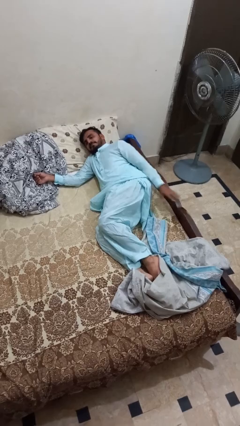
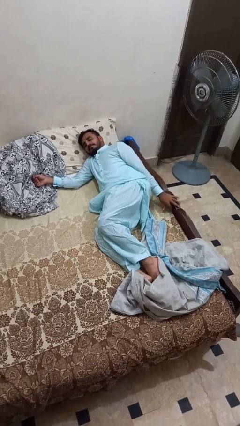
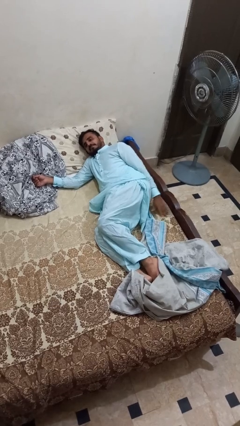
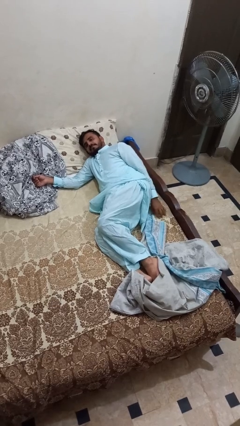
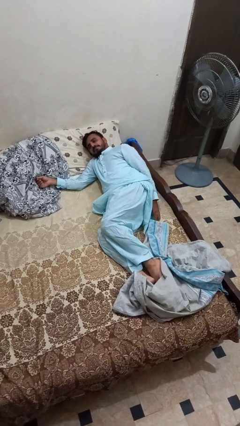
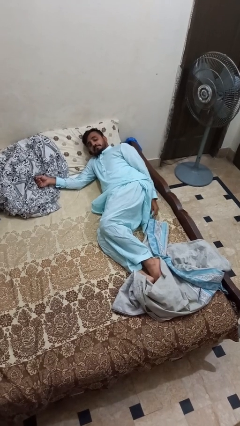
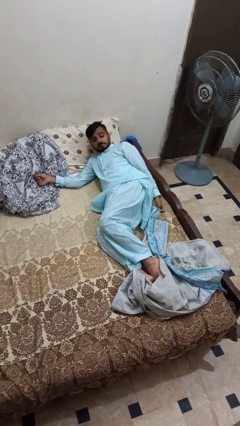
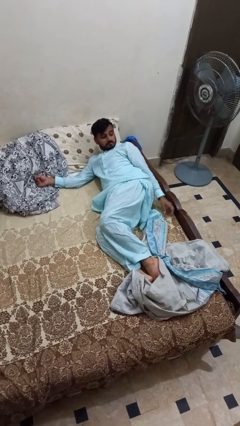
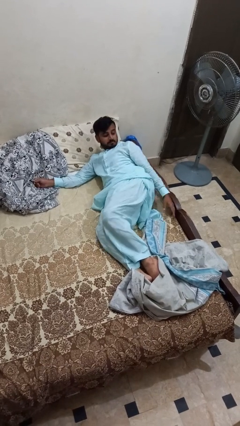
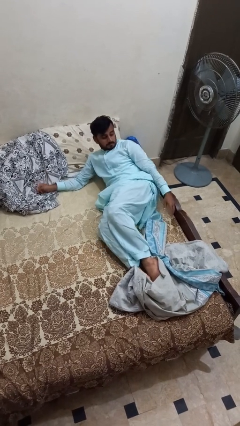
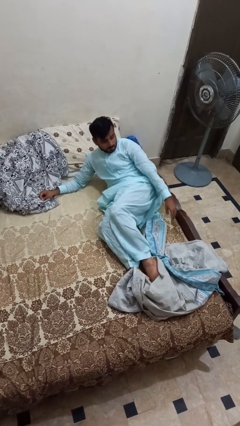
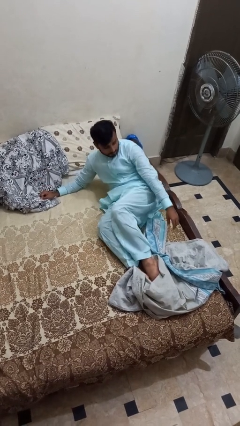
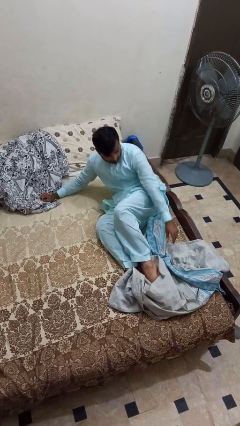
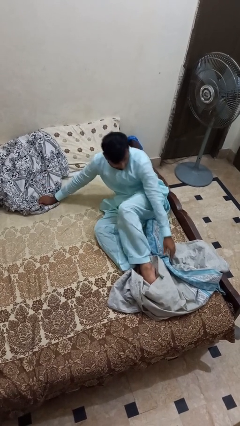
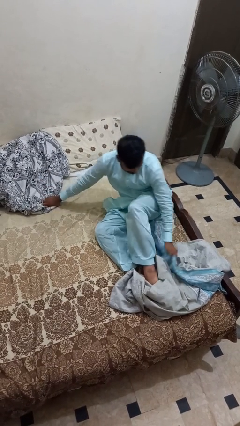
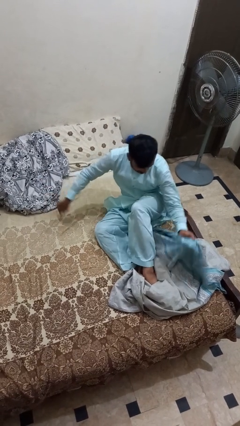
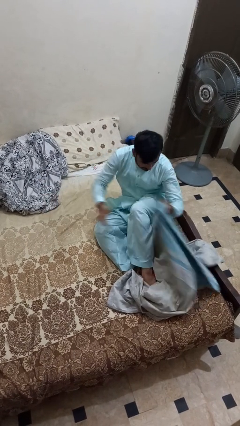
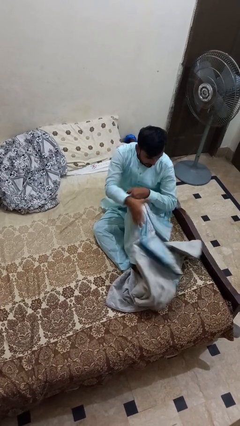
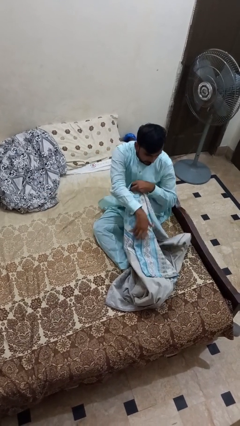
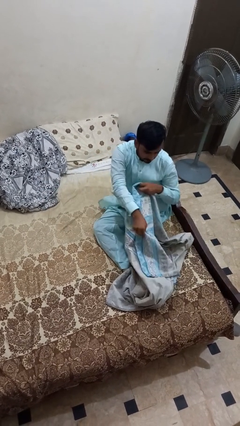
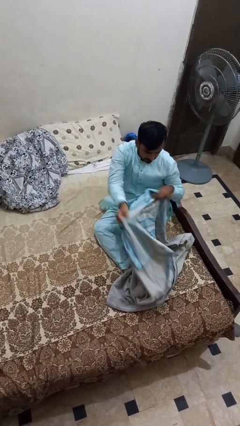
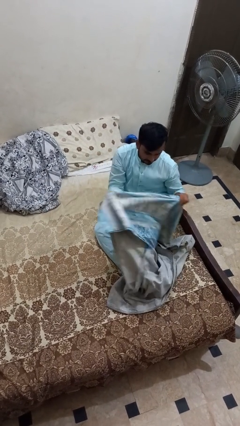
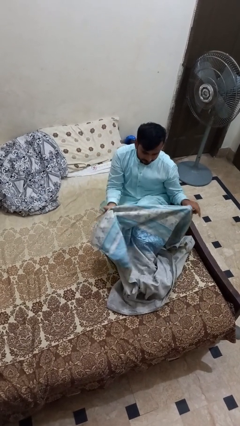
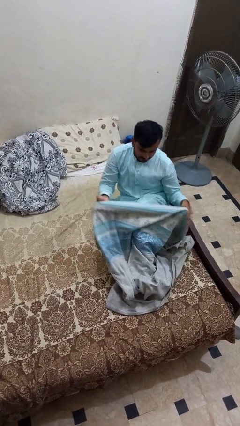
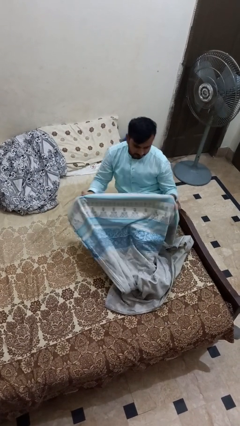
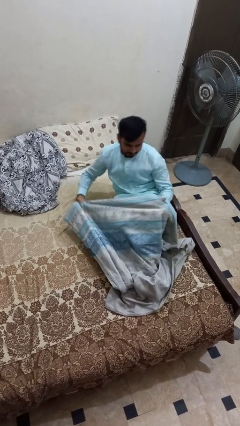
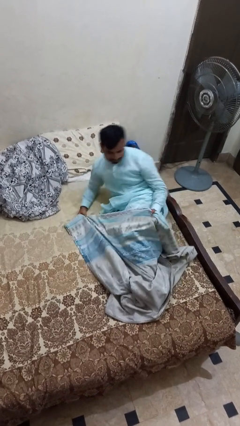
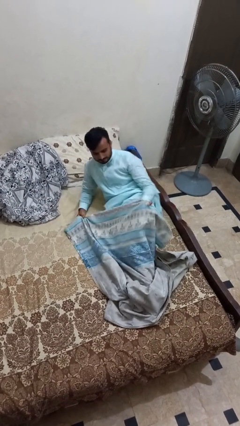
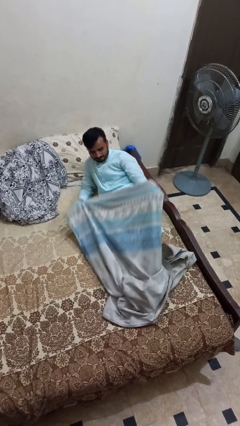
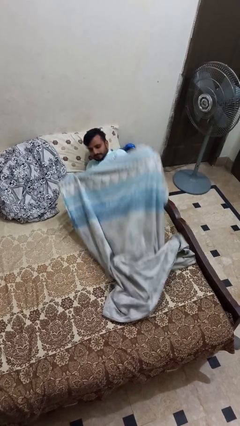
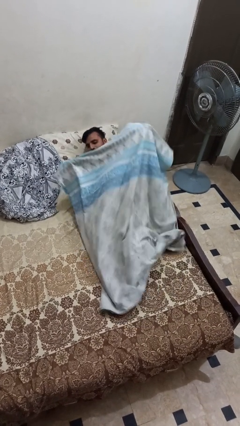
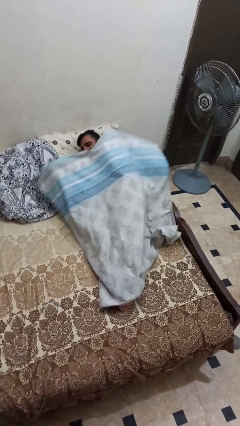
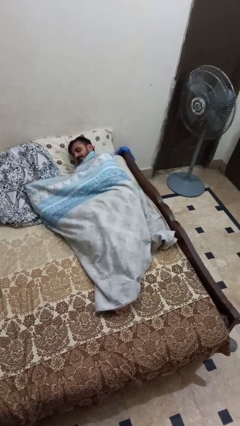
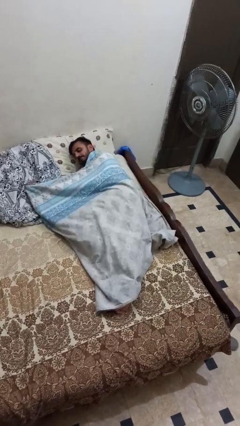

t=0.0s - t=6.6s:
person covers with bedsheets

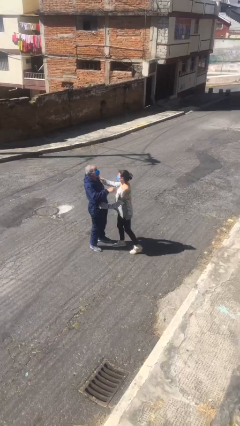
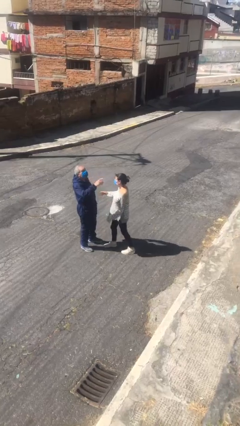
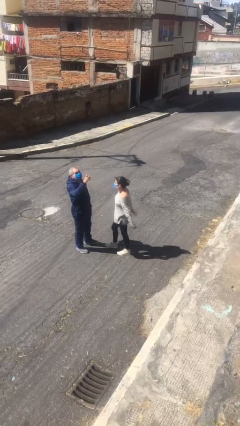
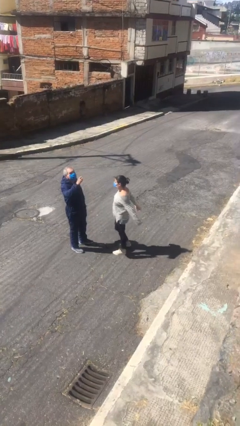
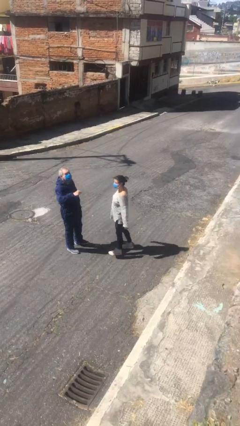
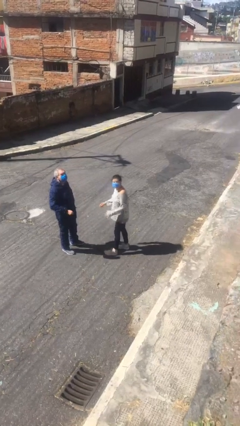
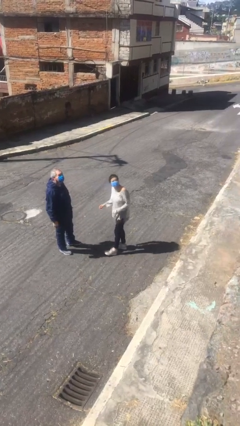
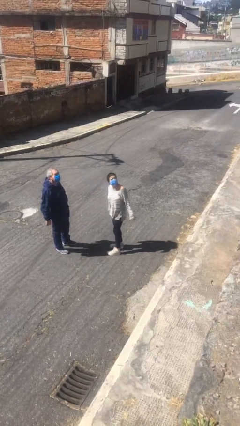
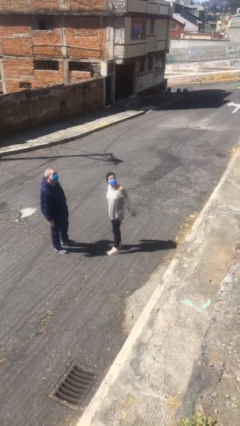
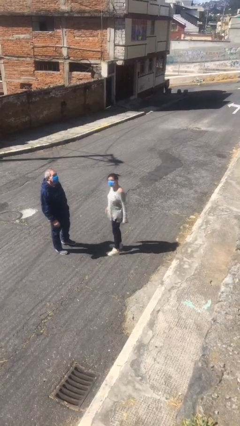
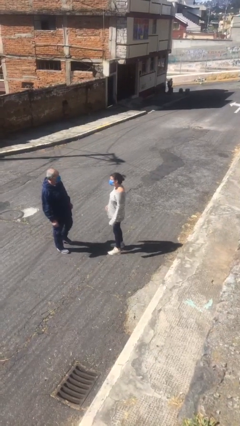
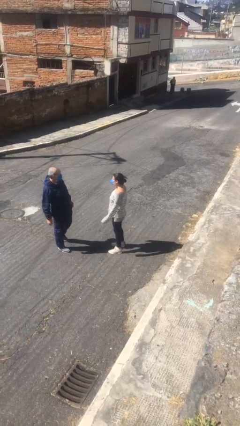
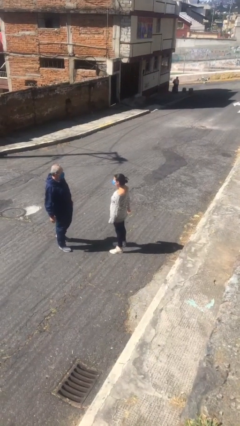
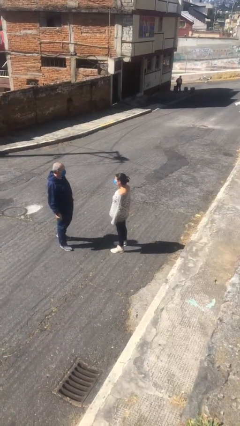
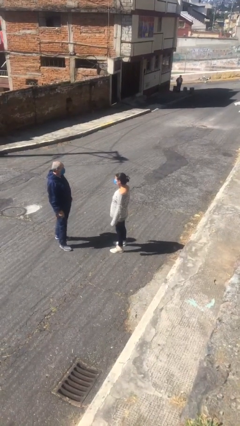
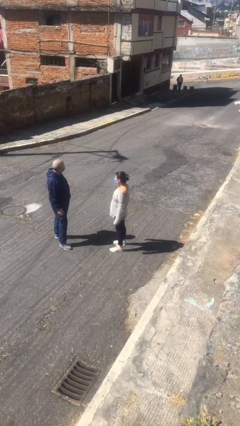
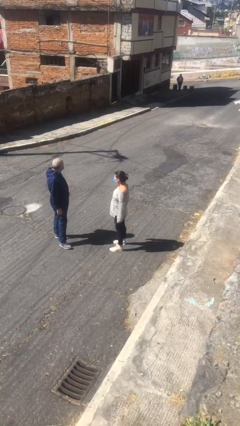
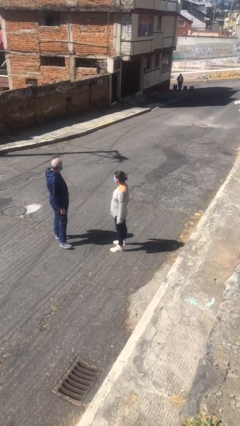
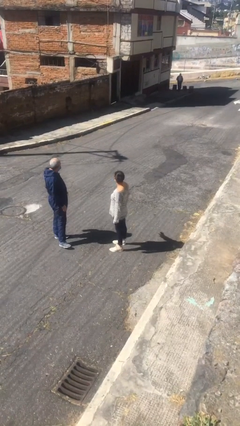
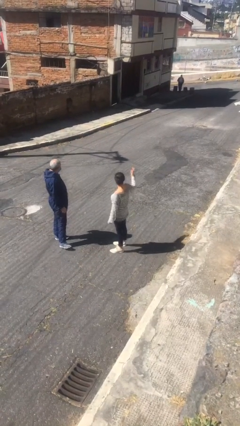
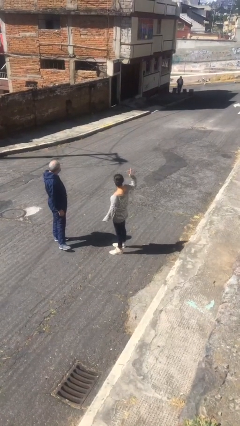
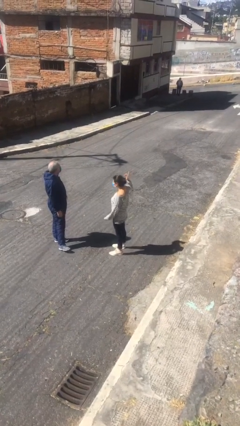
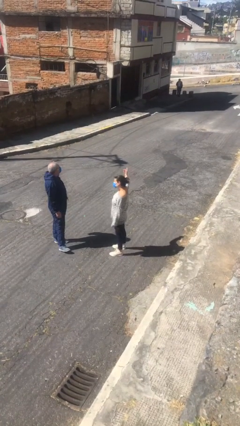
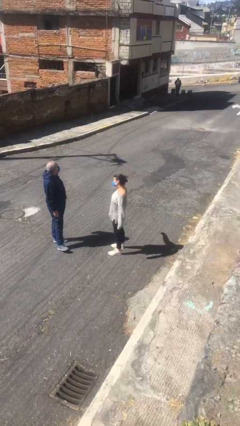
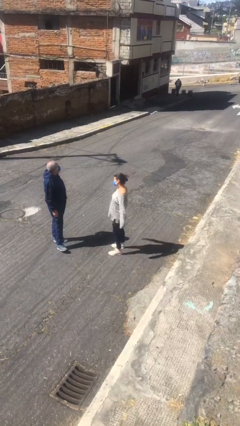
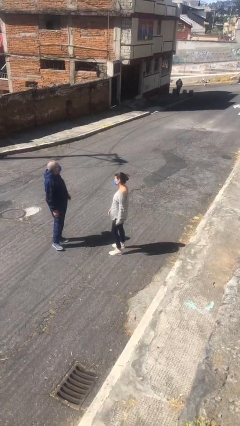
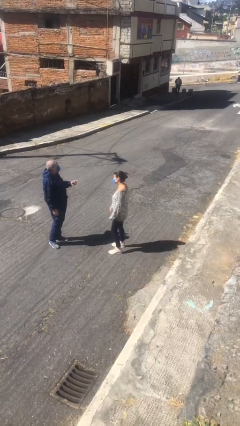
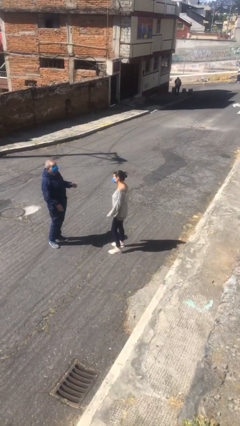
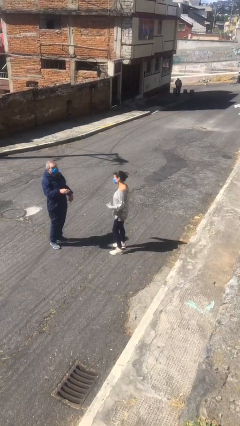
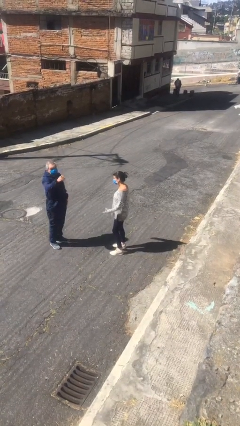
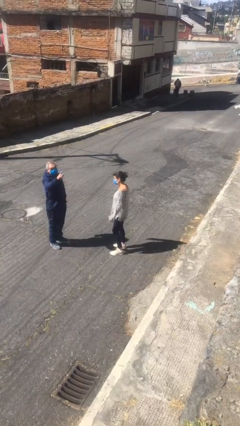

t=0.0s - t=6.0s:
person talks to person

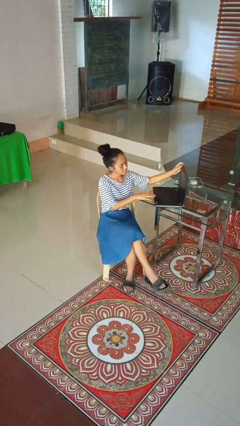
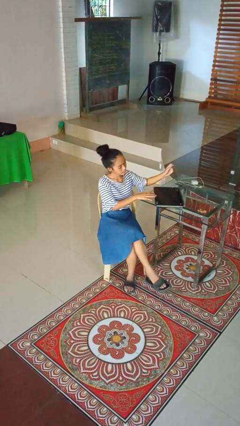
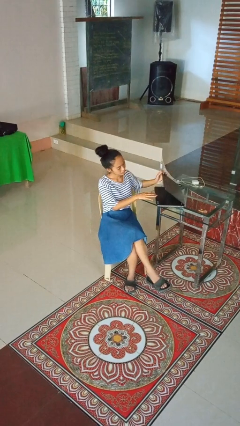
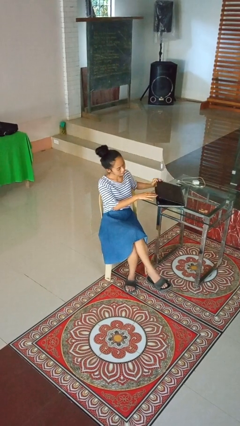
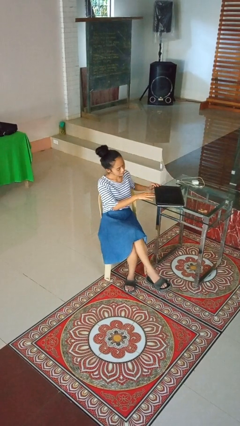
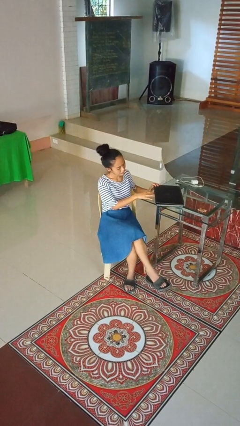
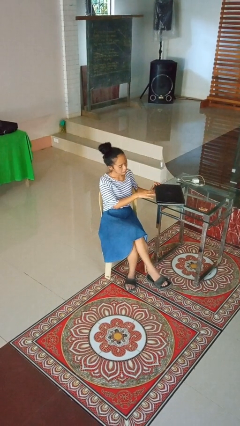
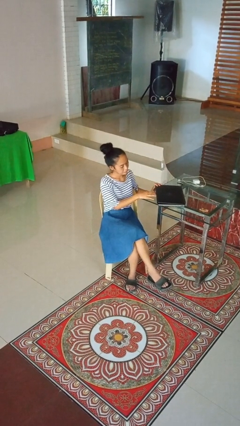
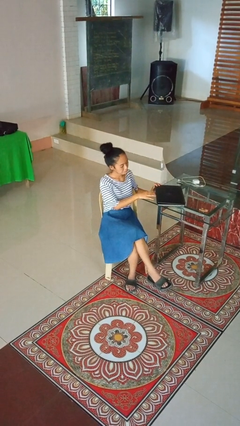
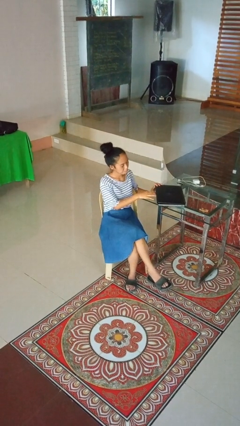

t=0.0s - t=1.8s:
person closes laptop

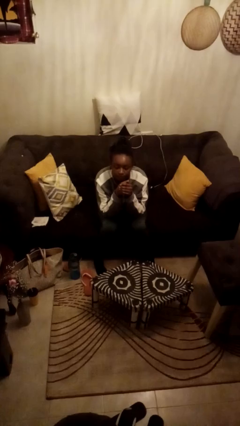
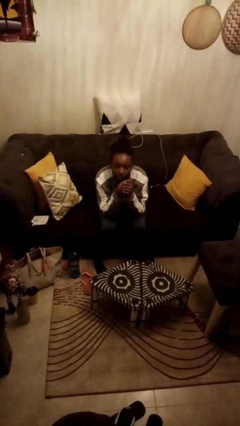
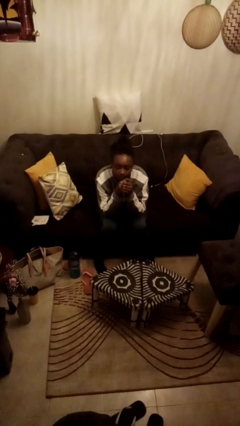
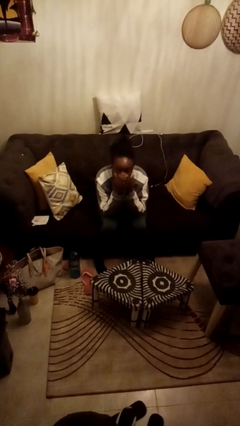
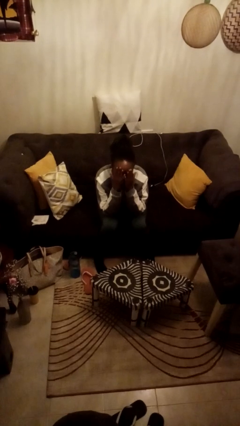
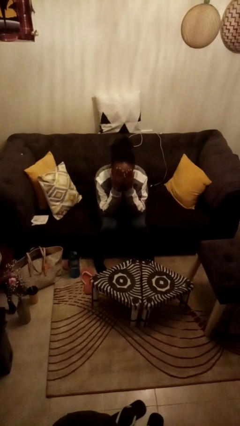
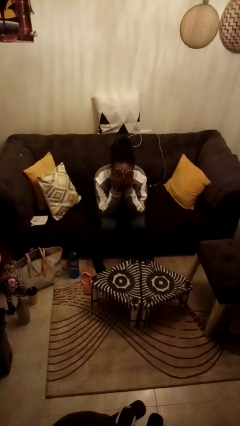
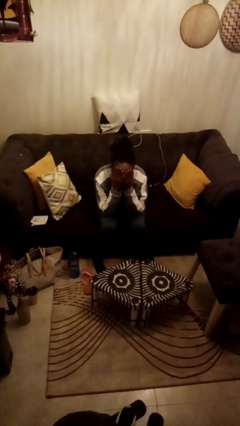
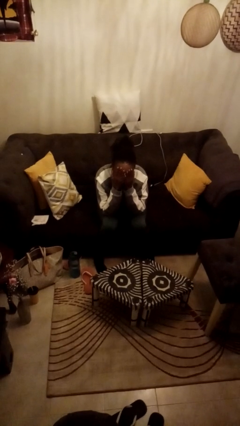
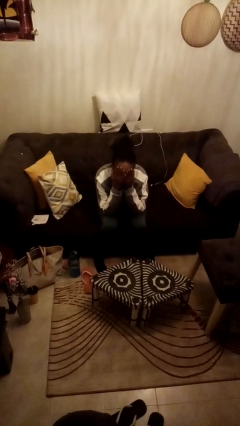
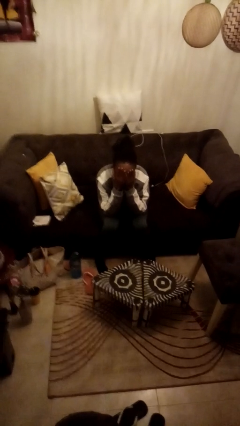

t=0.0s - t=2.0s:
person covers face with hands

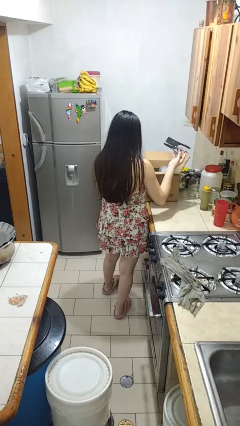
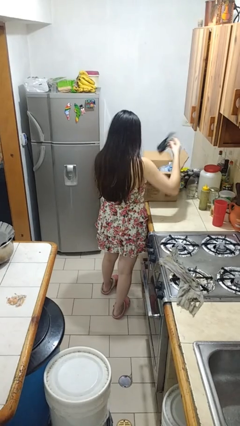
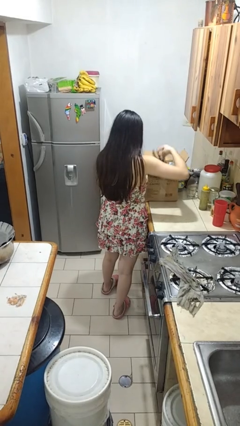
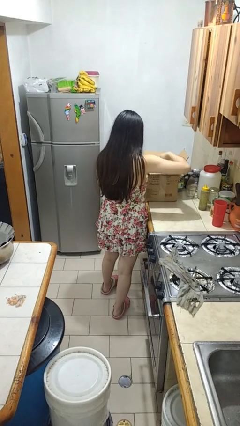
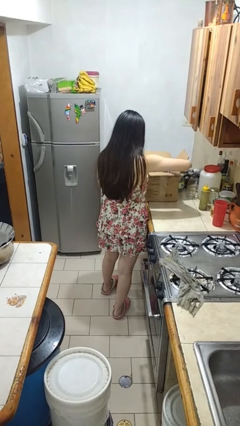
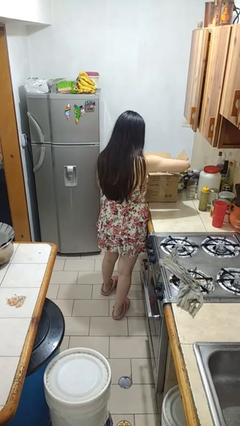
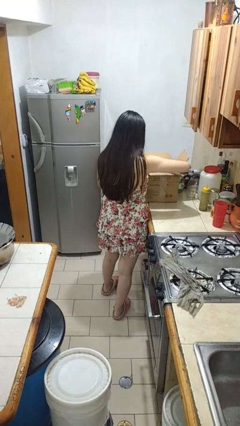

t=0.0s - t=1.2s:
person puts object into box

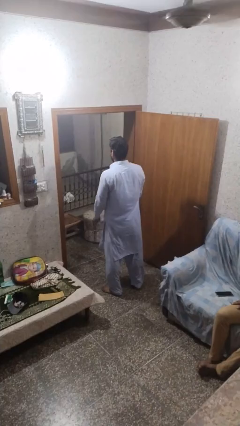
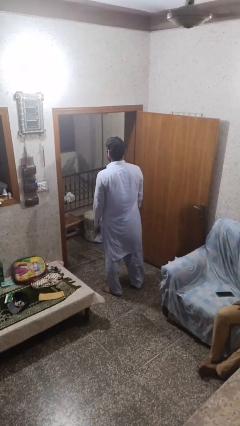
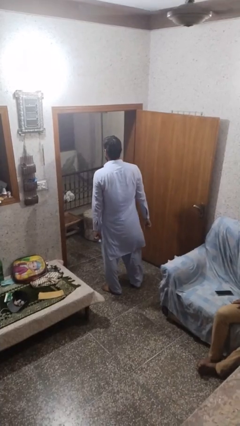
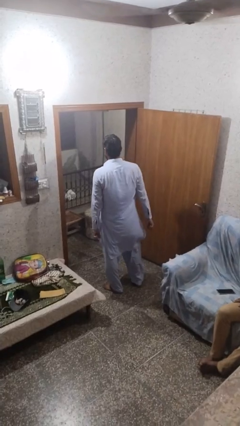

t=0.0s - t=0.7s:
person punches
